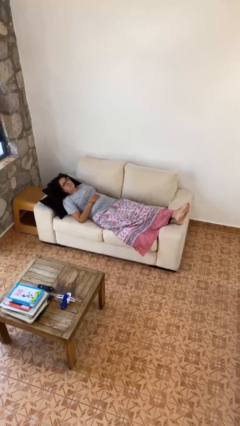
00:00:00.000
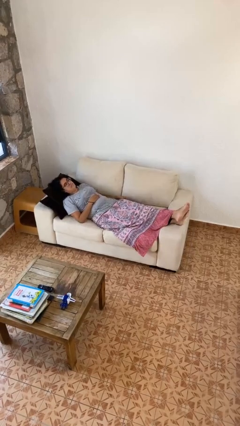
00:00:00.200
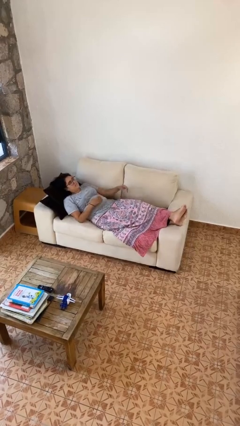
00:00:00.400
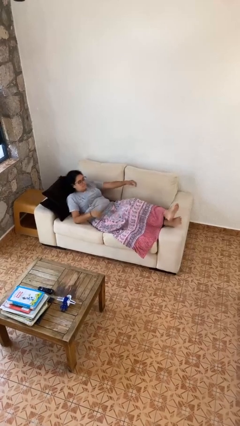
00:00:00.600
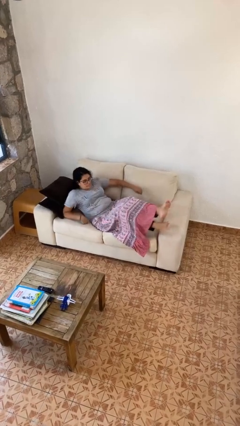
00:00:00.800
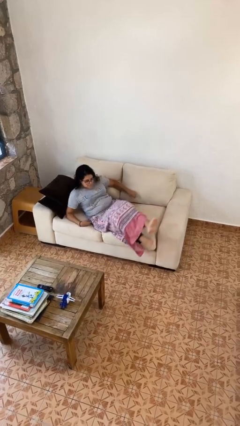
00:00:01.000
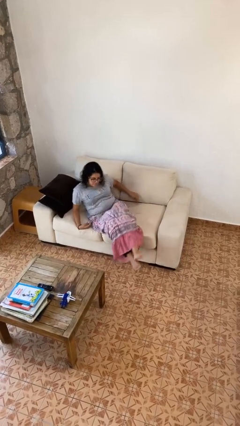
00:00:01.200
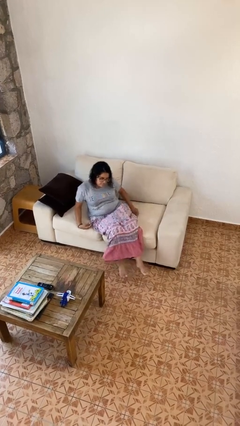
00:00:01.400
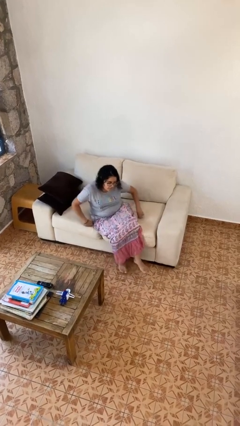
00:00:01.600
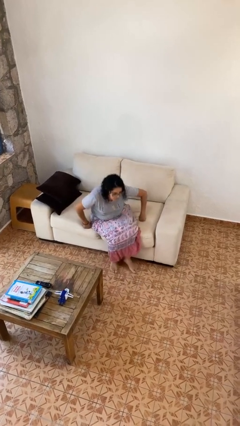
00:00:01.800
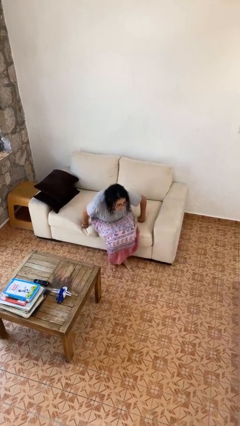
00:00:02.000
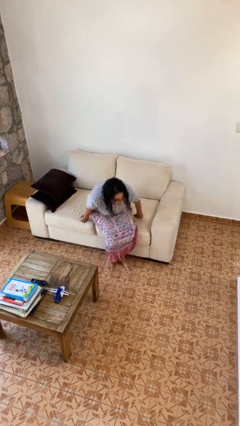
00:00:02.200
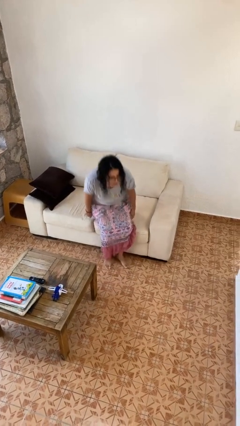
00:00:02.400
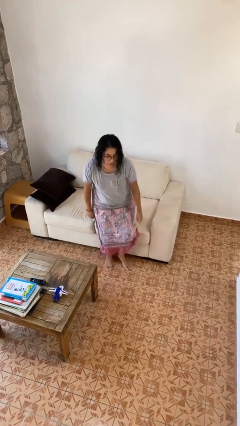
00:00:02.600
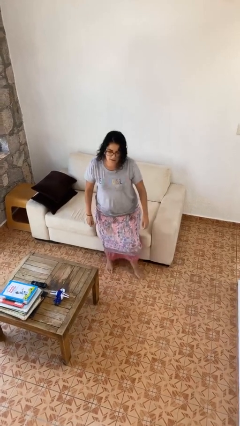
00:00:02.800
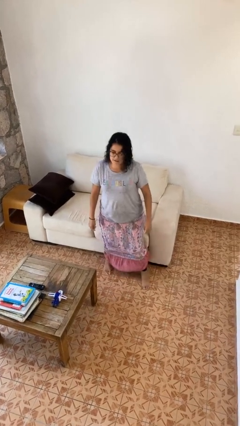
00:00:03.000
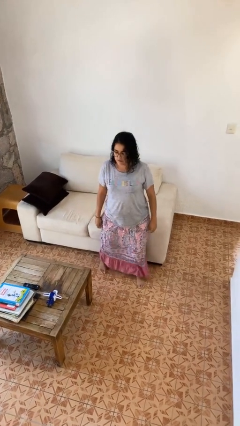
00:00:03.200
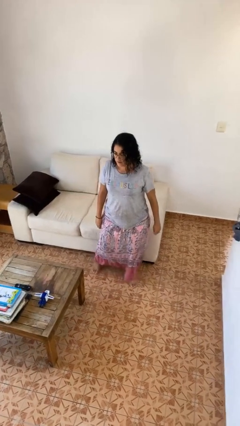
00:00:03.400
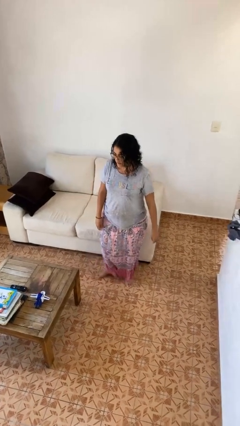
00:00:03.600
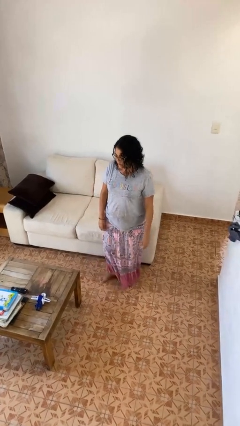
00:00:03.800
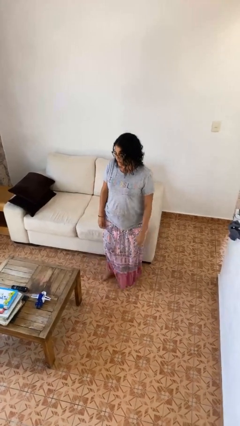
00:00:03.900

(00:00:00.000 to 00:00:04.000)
person stands up

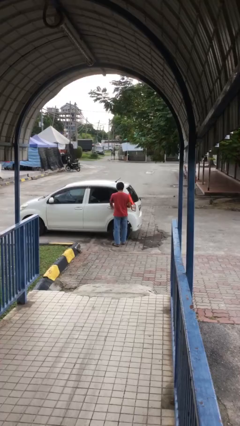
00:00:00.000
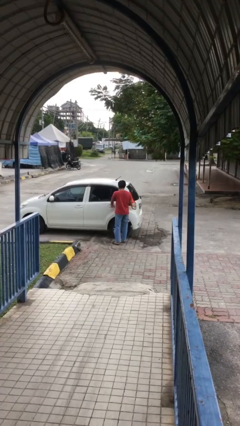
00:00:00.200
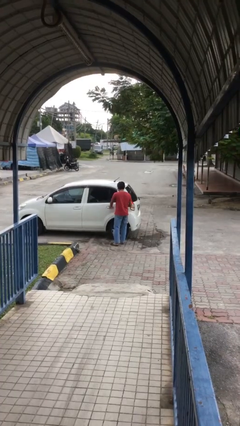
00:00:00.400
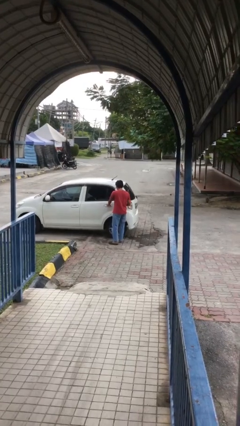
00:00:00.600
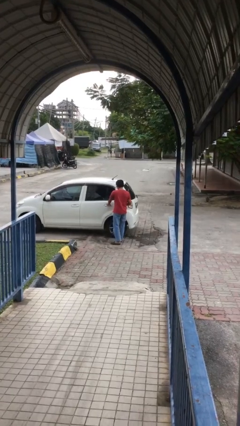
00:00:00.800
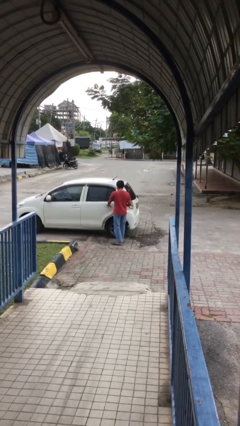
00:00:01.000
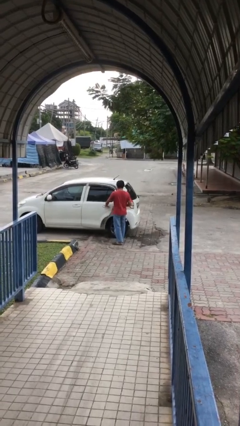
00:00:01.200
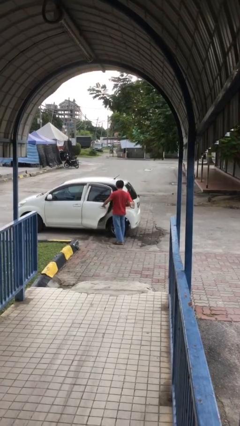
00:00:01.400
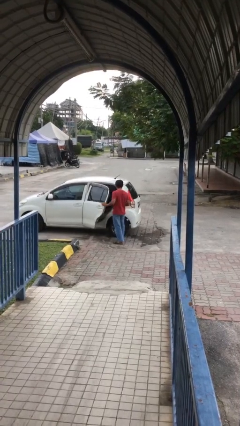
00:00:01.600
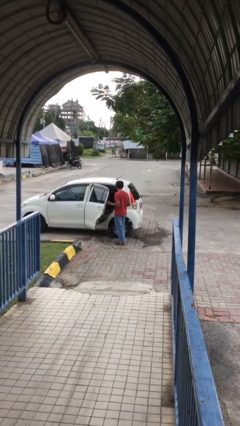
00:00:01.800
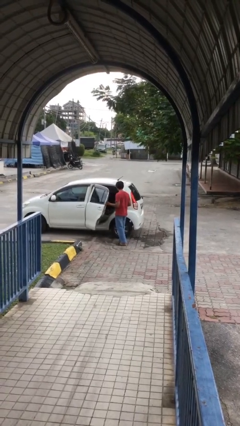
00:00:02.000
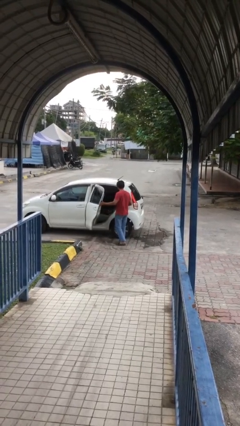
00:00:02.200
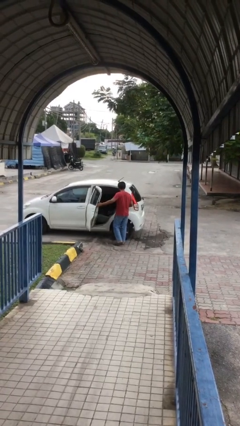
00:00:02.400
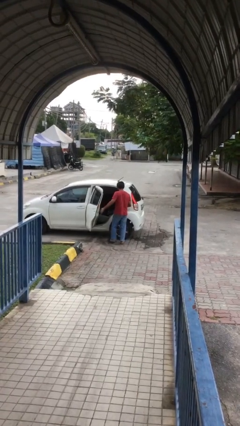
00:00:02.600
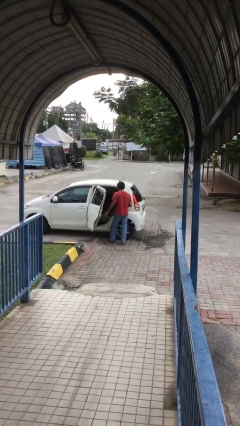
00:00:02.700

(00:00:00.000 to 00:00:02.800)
person opens car door

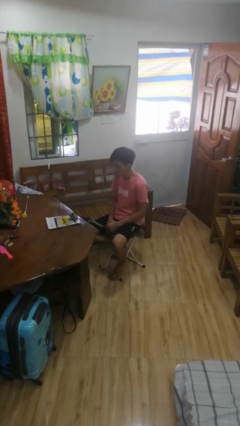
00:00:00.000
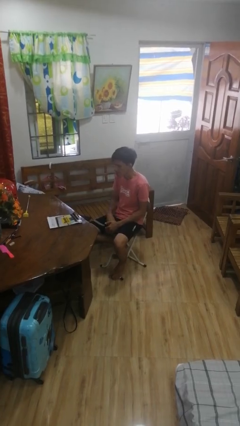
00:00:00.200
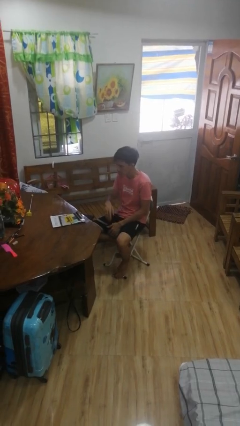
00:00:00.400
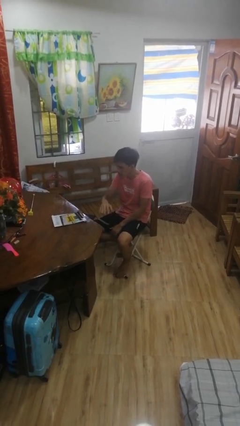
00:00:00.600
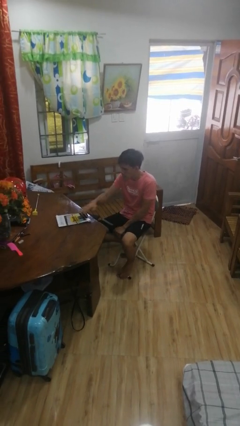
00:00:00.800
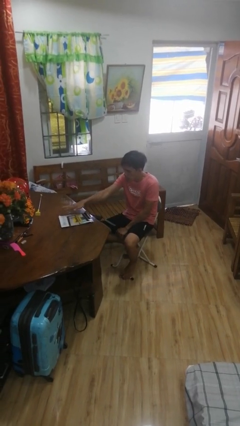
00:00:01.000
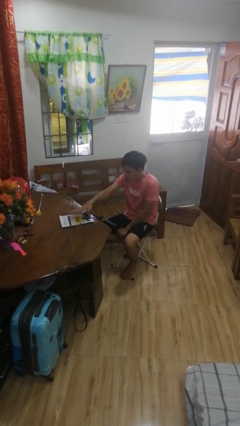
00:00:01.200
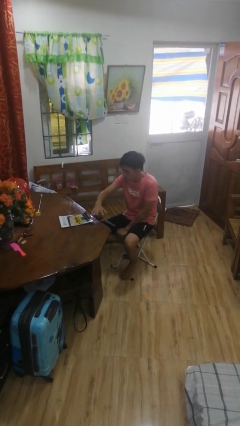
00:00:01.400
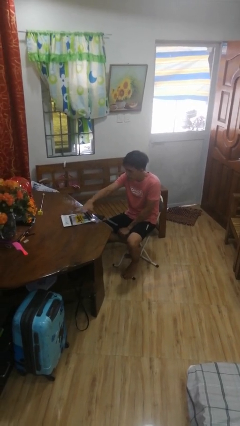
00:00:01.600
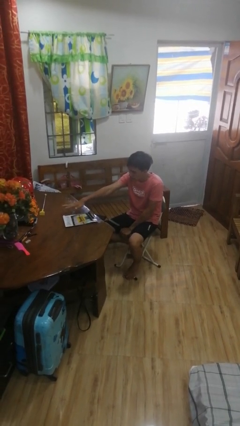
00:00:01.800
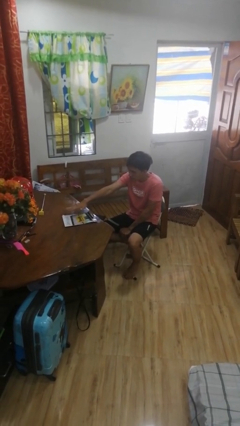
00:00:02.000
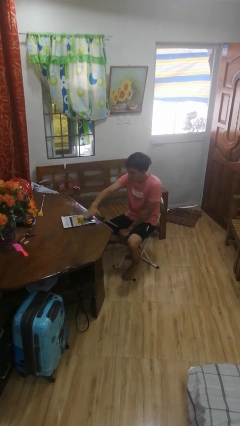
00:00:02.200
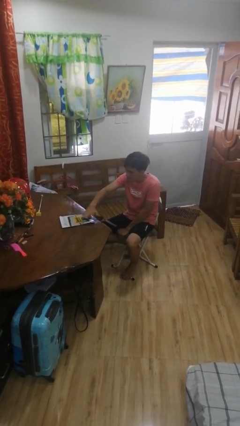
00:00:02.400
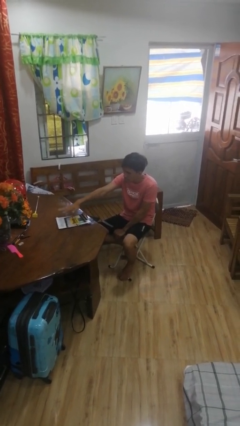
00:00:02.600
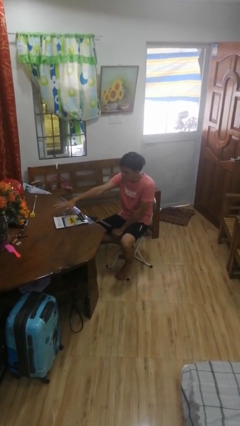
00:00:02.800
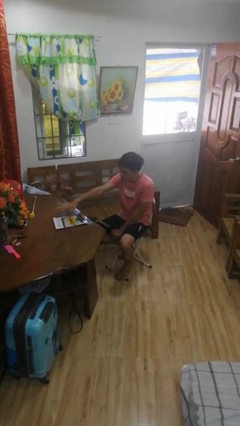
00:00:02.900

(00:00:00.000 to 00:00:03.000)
person waves hand over object

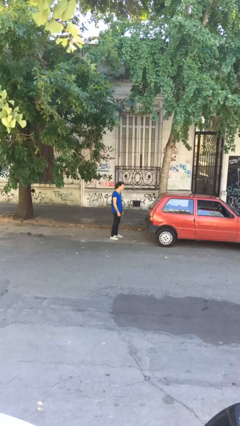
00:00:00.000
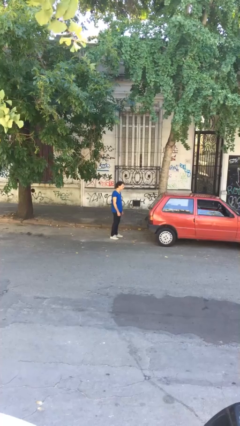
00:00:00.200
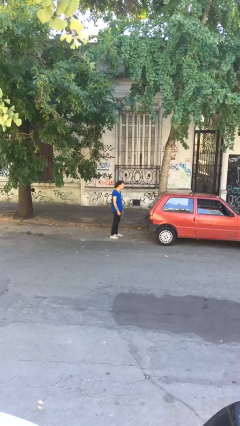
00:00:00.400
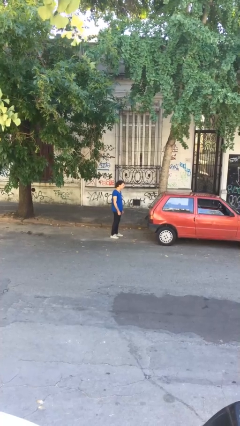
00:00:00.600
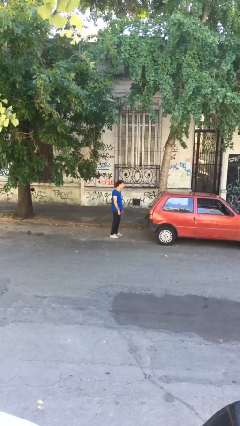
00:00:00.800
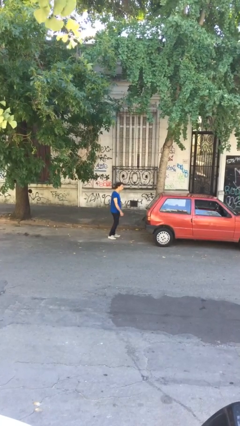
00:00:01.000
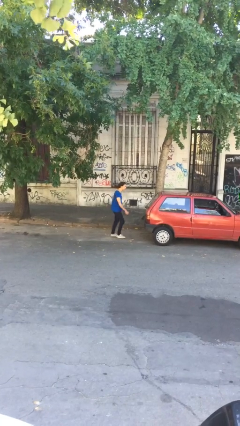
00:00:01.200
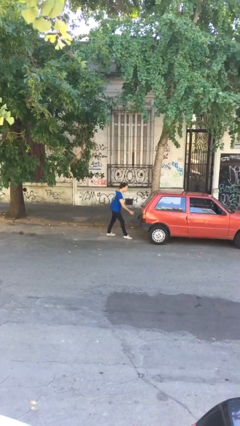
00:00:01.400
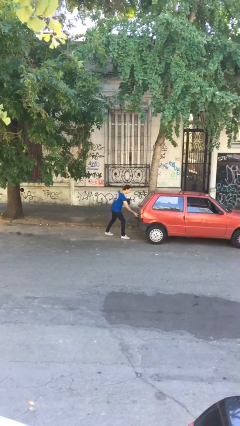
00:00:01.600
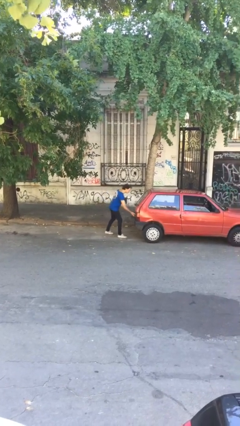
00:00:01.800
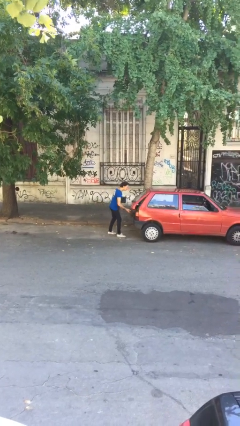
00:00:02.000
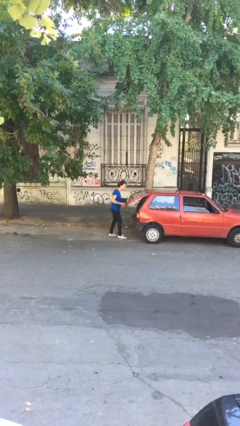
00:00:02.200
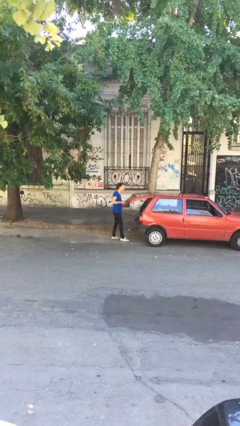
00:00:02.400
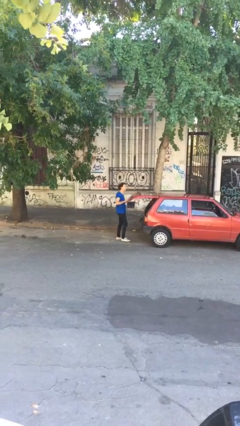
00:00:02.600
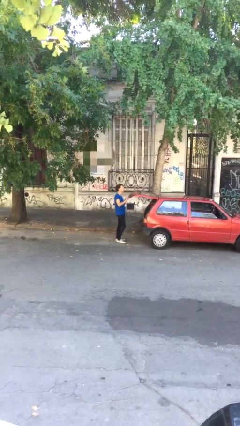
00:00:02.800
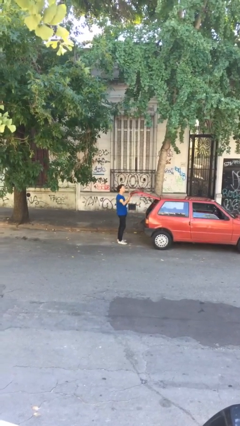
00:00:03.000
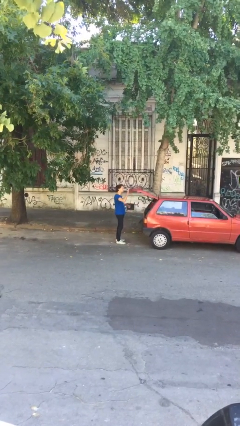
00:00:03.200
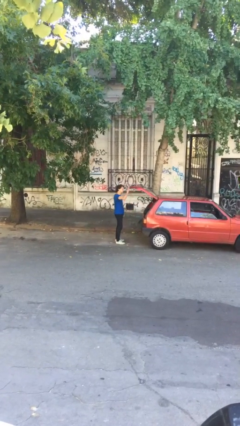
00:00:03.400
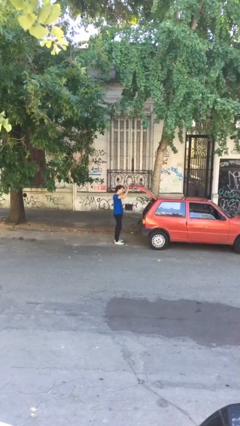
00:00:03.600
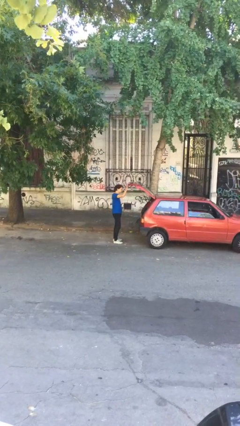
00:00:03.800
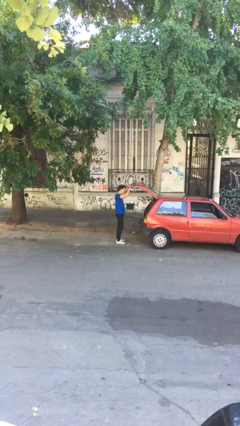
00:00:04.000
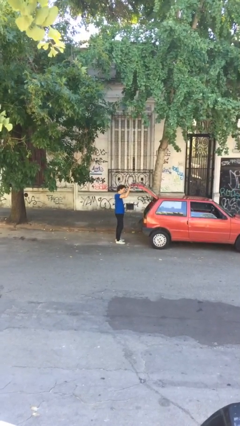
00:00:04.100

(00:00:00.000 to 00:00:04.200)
person opens car trunk

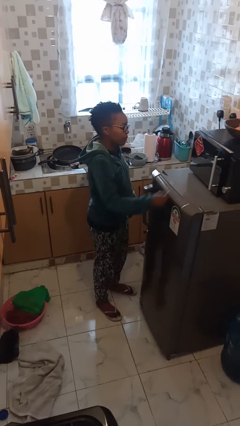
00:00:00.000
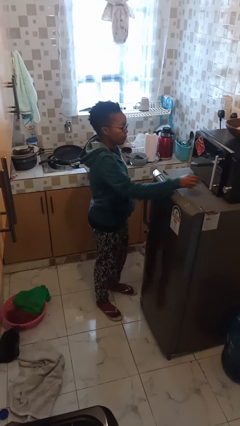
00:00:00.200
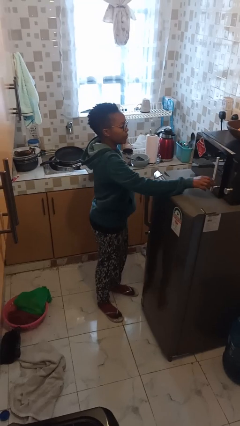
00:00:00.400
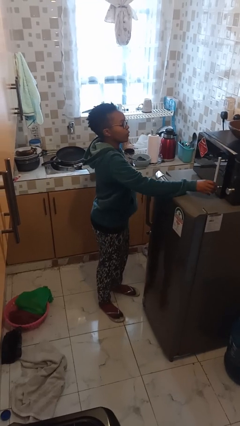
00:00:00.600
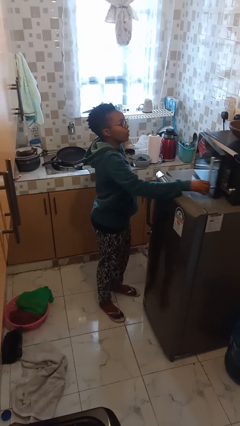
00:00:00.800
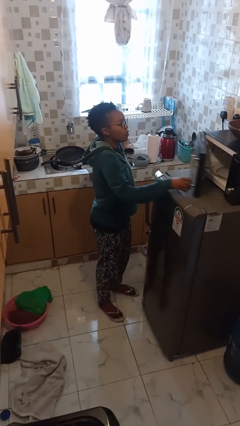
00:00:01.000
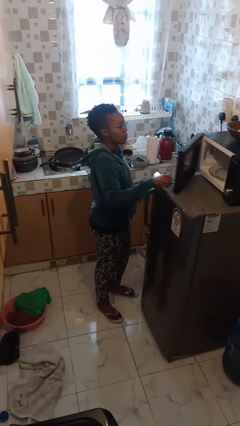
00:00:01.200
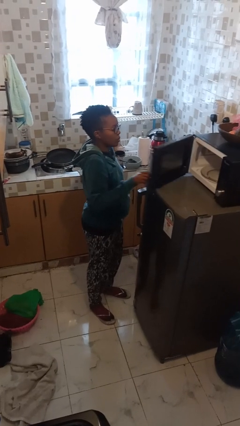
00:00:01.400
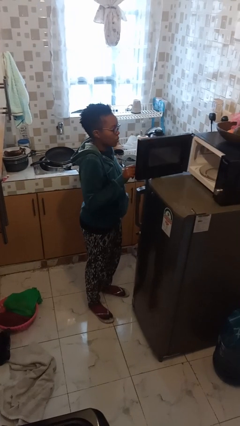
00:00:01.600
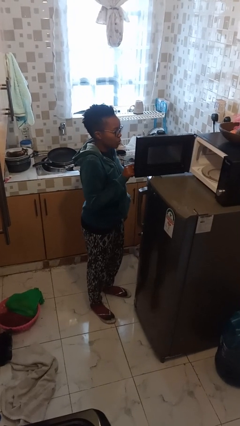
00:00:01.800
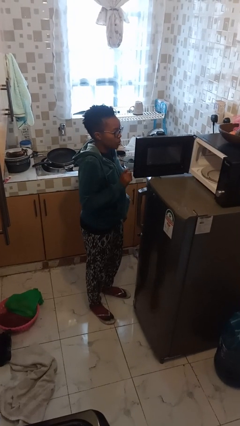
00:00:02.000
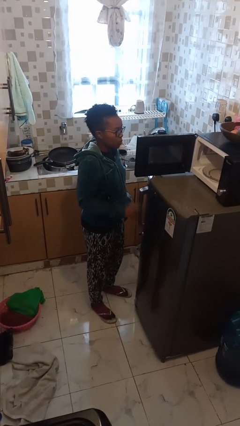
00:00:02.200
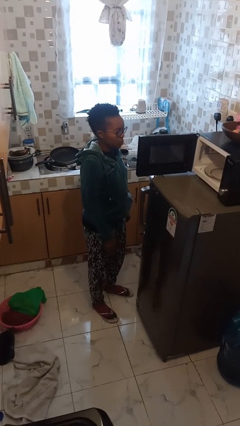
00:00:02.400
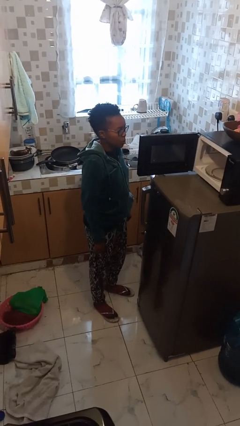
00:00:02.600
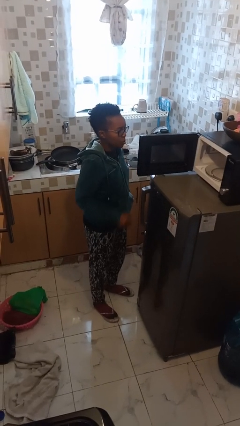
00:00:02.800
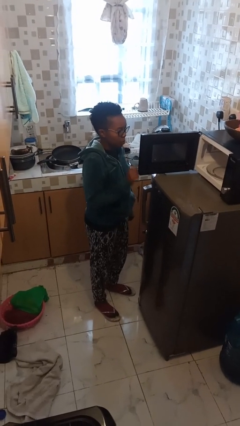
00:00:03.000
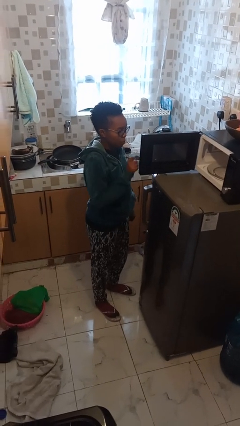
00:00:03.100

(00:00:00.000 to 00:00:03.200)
person opens microwave

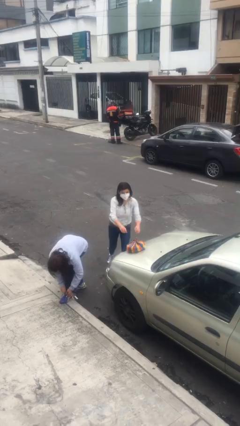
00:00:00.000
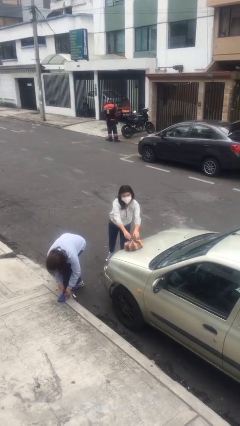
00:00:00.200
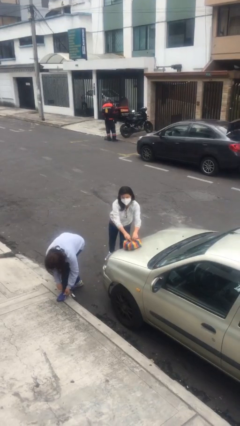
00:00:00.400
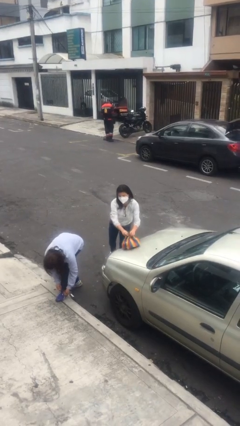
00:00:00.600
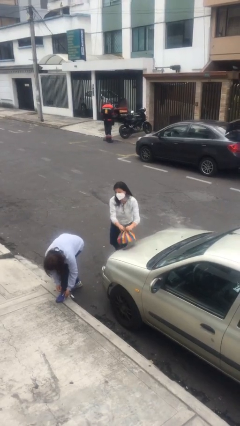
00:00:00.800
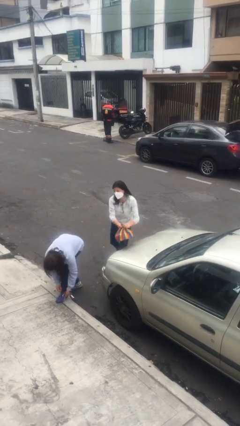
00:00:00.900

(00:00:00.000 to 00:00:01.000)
person steals object from person
